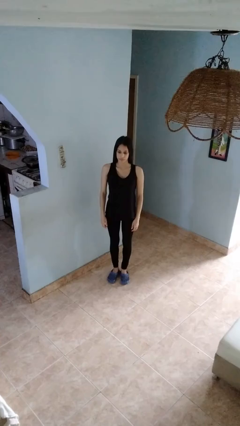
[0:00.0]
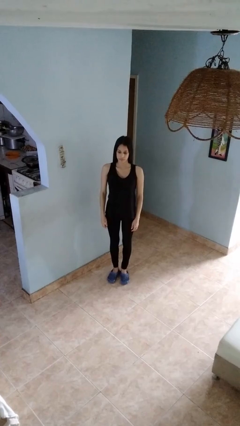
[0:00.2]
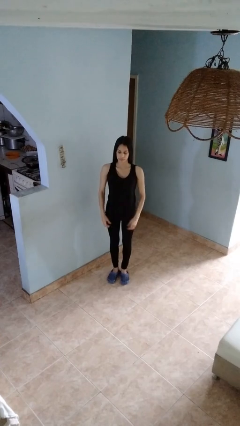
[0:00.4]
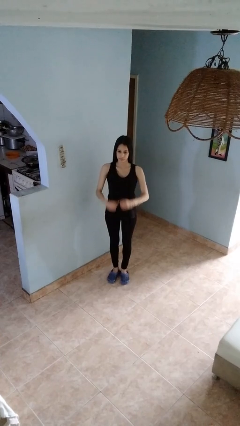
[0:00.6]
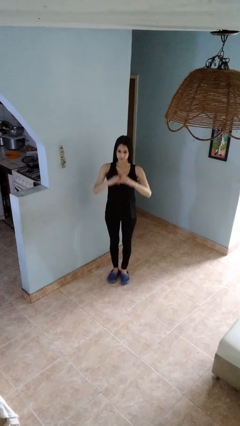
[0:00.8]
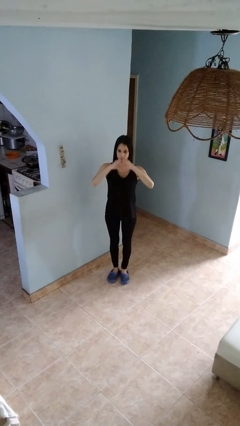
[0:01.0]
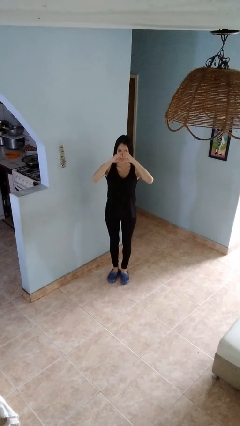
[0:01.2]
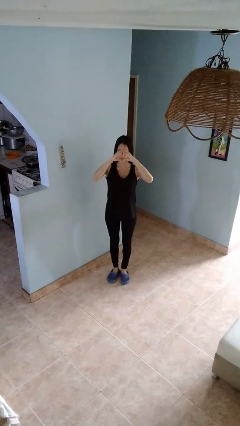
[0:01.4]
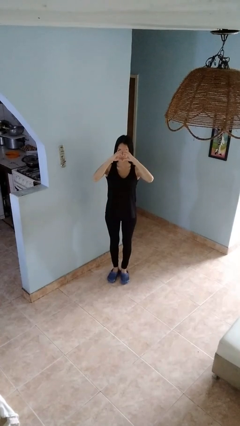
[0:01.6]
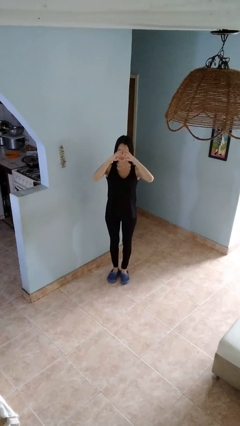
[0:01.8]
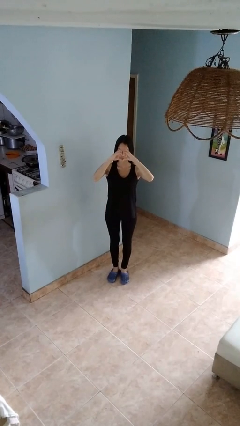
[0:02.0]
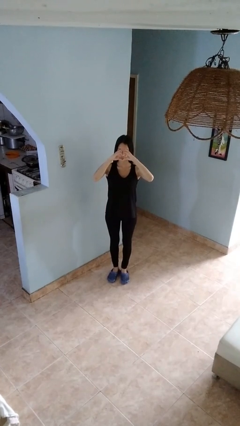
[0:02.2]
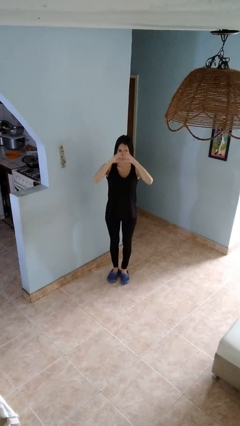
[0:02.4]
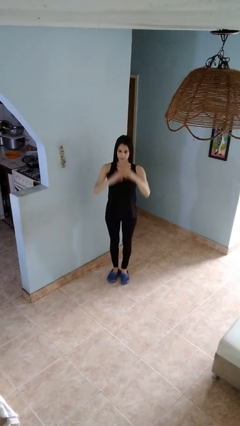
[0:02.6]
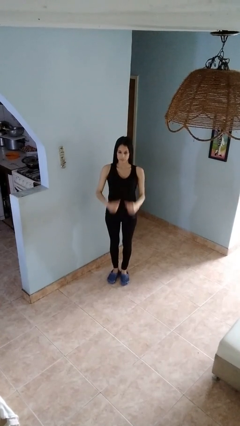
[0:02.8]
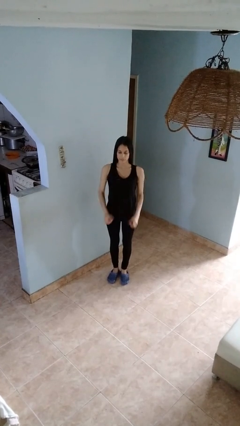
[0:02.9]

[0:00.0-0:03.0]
person gestures heart

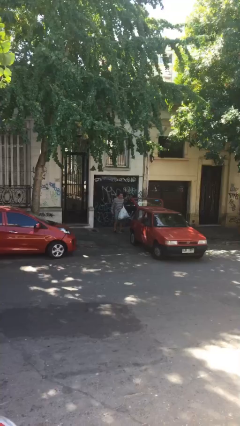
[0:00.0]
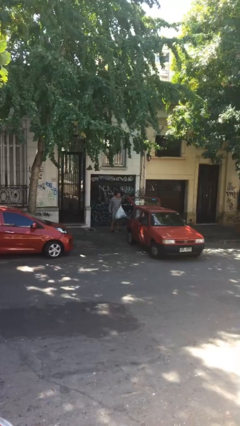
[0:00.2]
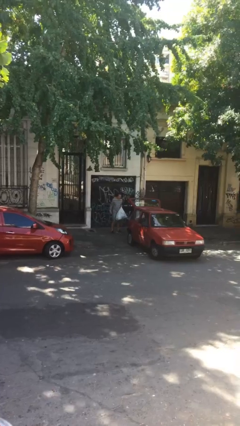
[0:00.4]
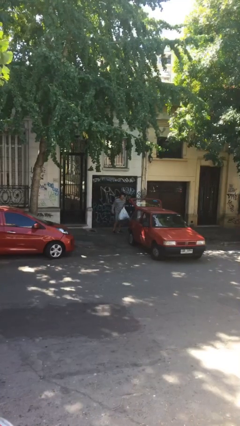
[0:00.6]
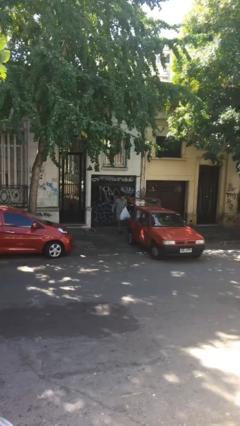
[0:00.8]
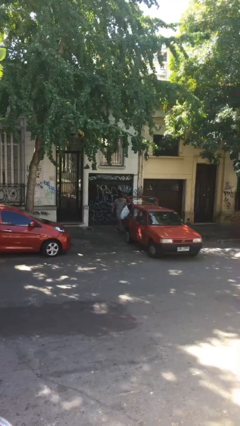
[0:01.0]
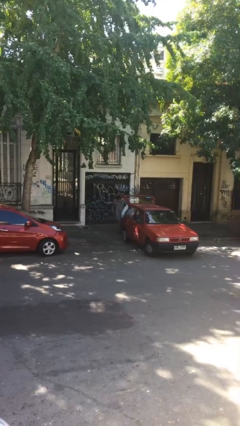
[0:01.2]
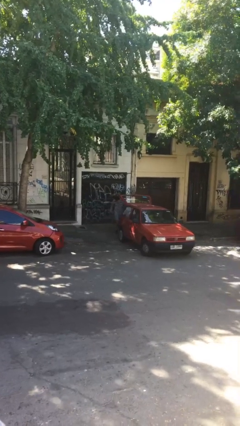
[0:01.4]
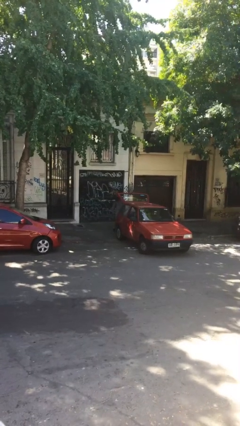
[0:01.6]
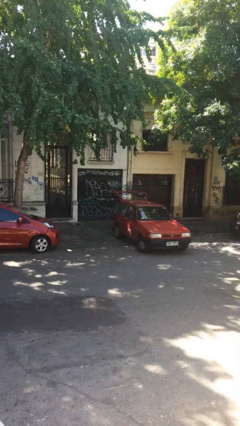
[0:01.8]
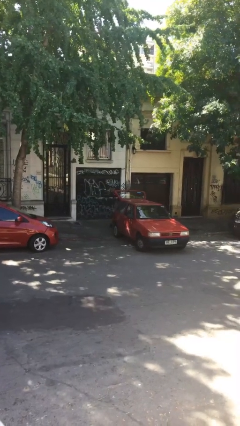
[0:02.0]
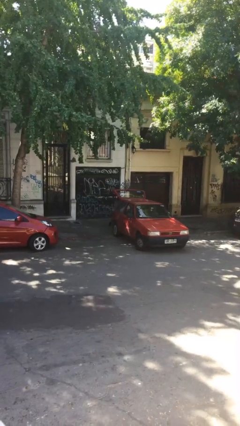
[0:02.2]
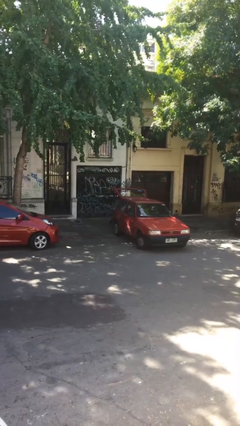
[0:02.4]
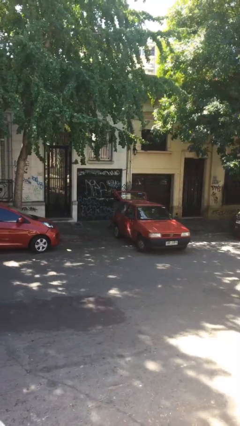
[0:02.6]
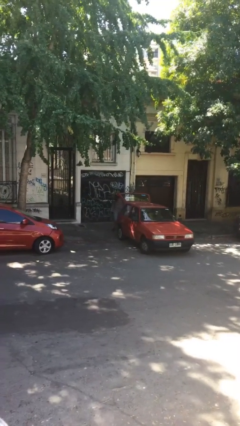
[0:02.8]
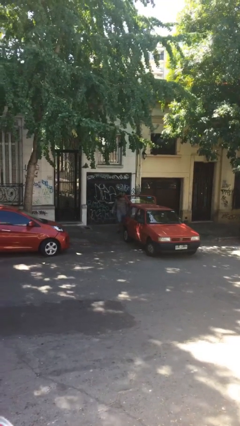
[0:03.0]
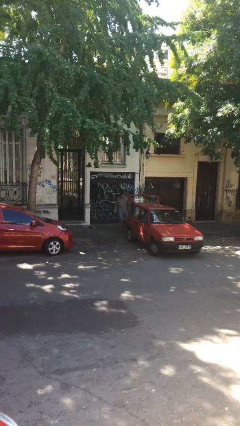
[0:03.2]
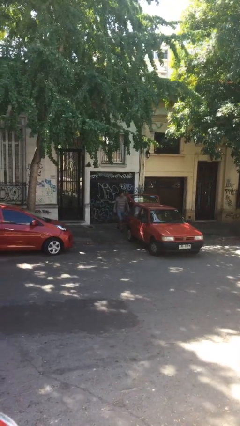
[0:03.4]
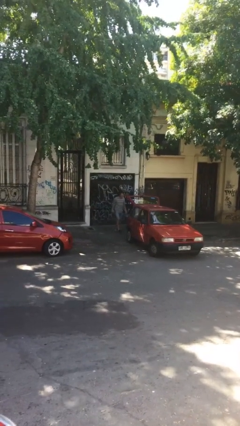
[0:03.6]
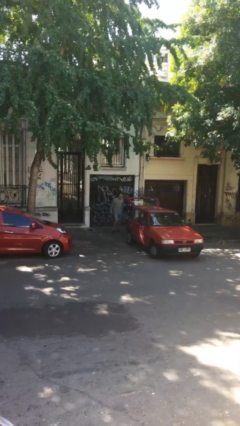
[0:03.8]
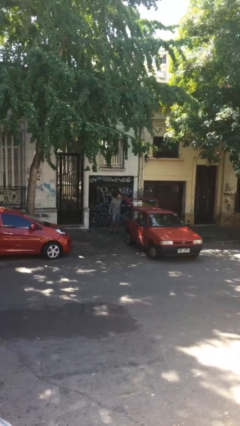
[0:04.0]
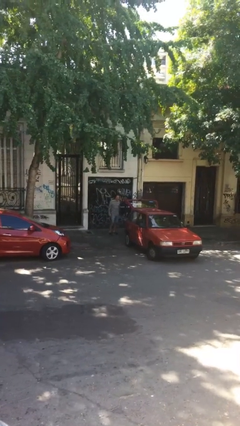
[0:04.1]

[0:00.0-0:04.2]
person loads car

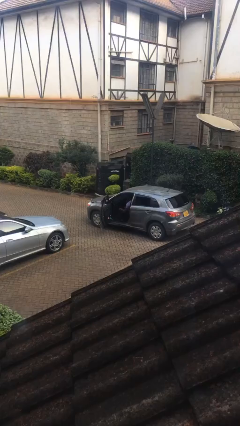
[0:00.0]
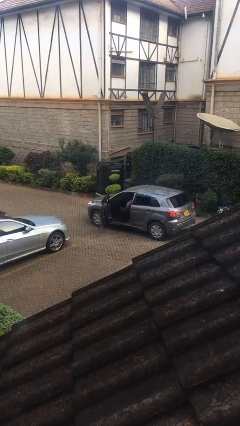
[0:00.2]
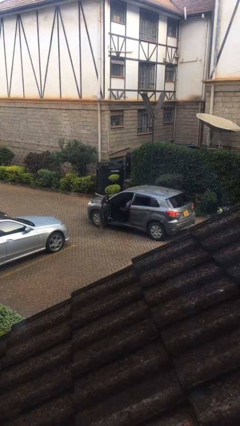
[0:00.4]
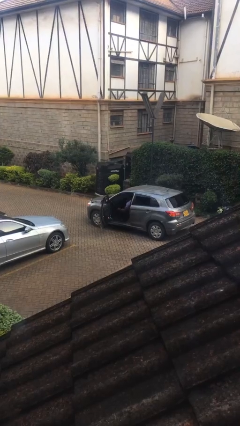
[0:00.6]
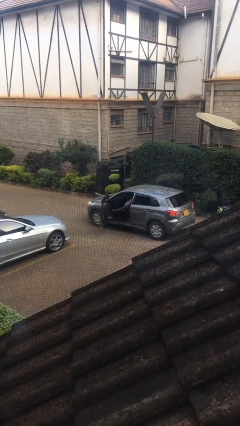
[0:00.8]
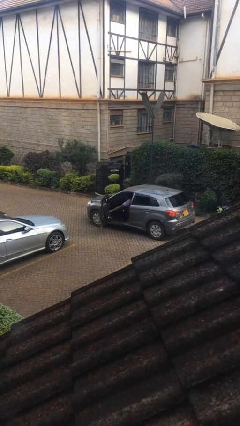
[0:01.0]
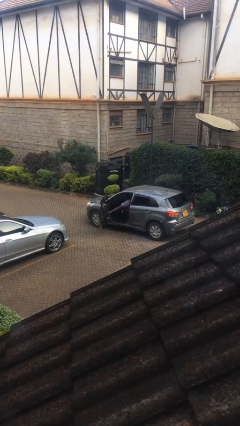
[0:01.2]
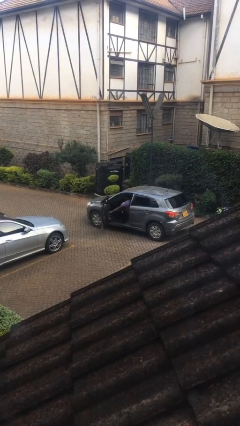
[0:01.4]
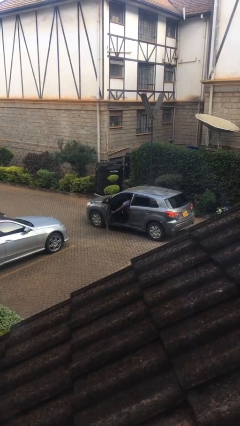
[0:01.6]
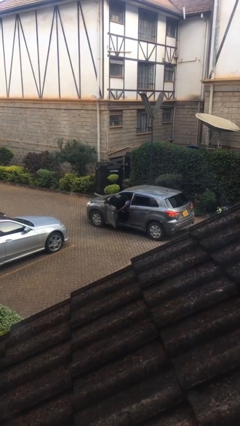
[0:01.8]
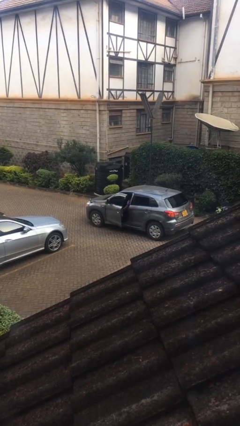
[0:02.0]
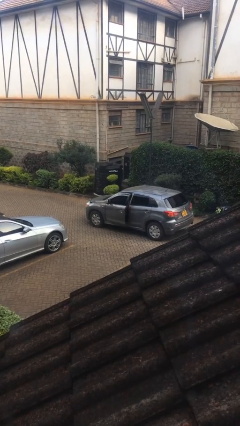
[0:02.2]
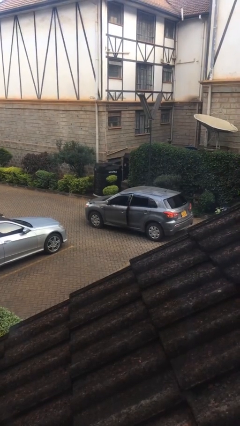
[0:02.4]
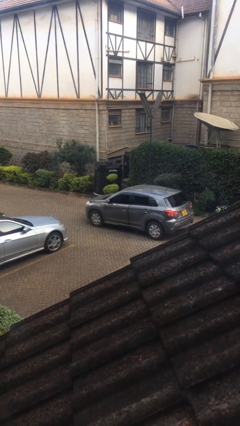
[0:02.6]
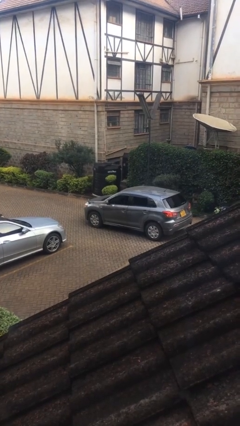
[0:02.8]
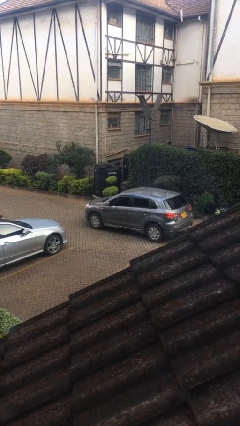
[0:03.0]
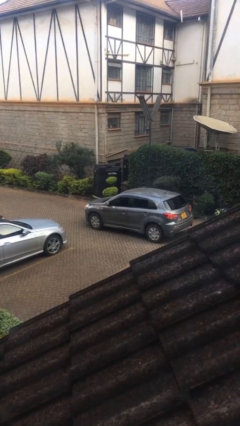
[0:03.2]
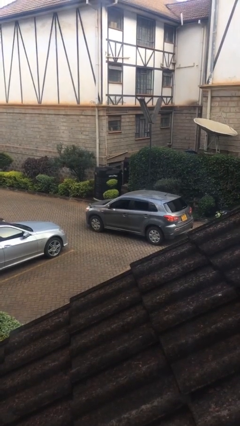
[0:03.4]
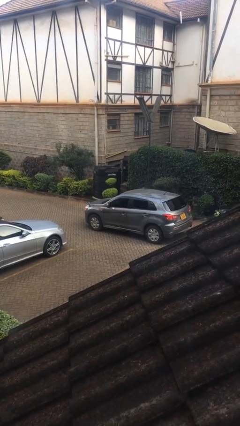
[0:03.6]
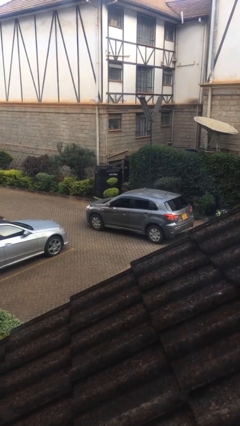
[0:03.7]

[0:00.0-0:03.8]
person closes car door

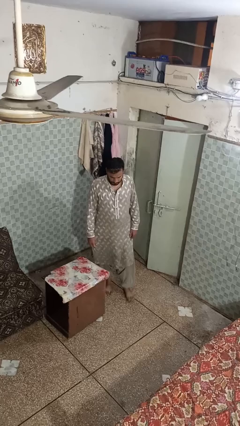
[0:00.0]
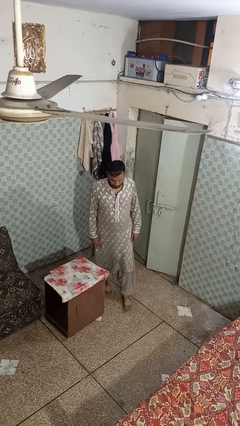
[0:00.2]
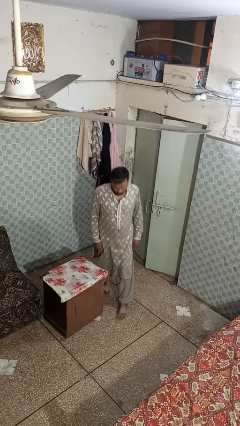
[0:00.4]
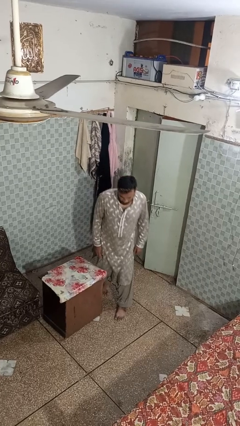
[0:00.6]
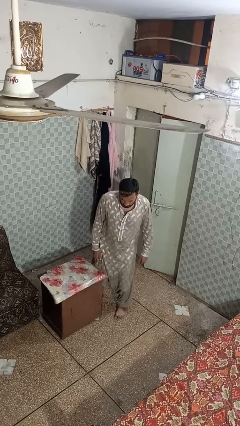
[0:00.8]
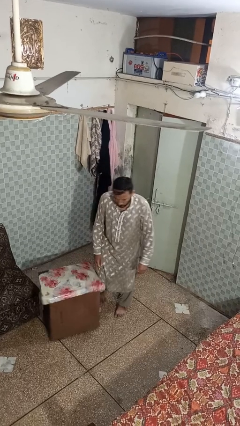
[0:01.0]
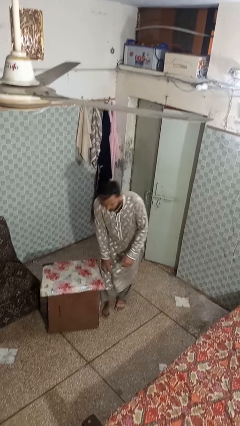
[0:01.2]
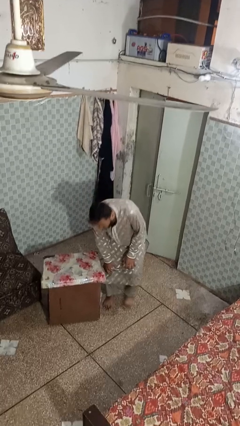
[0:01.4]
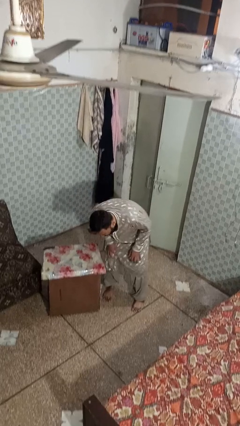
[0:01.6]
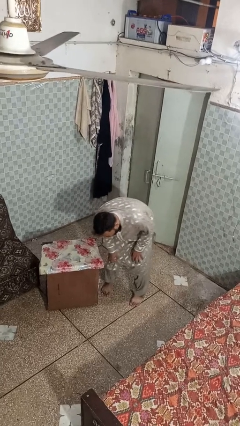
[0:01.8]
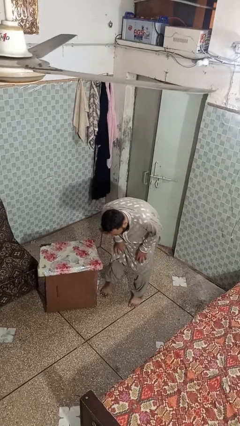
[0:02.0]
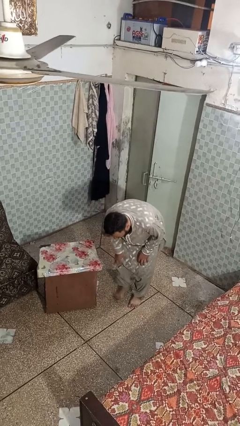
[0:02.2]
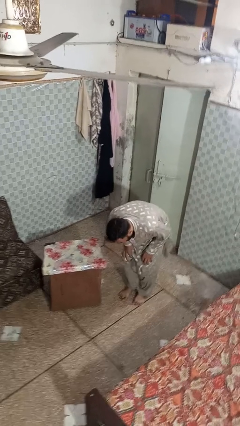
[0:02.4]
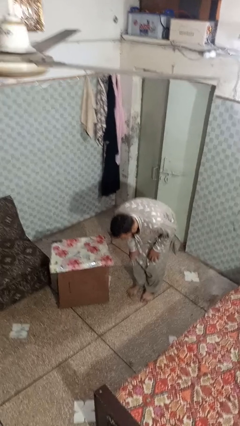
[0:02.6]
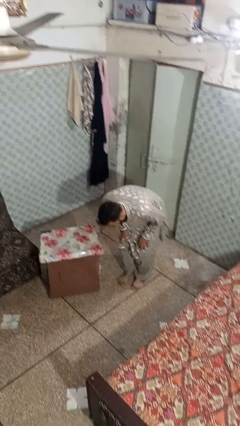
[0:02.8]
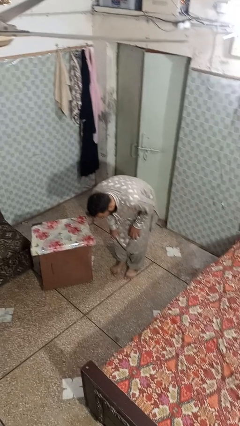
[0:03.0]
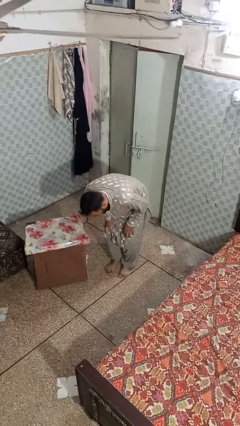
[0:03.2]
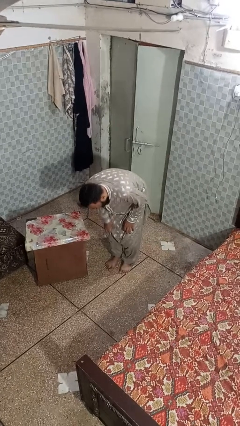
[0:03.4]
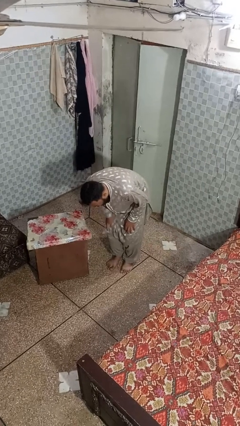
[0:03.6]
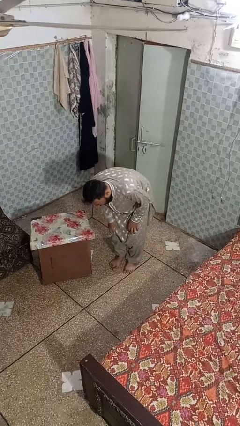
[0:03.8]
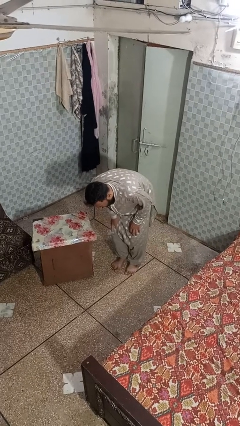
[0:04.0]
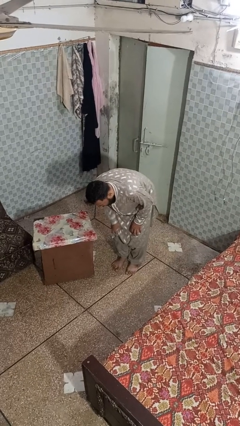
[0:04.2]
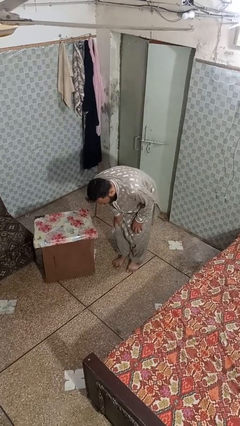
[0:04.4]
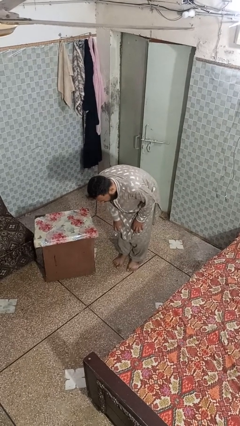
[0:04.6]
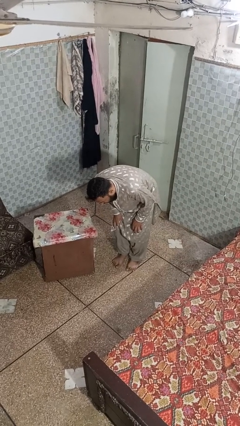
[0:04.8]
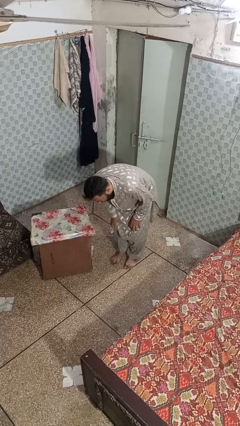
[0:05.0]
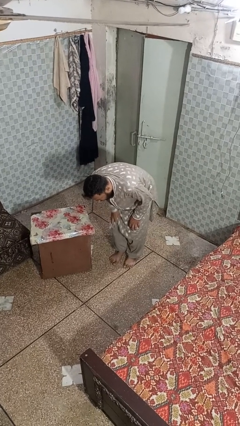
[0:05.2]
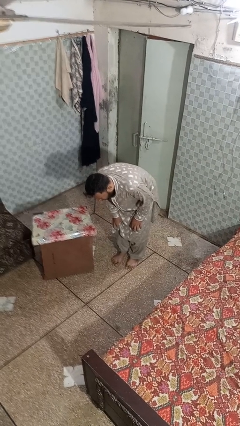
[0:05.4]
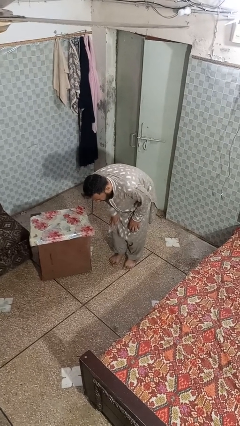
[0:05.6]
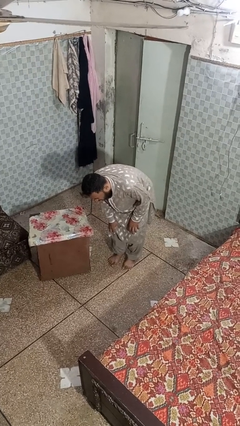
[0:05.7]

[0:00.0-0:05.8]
person trips on object on floor

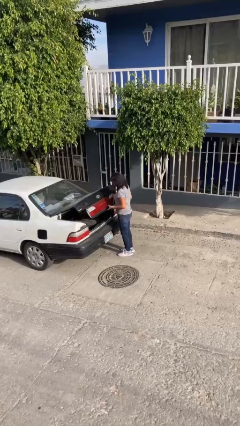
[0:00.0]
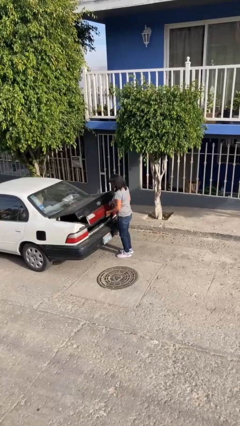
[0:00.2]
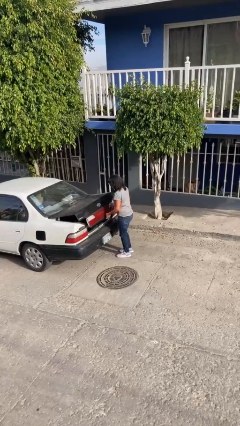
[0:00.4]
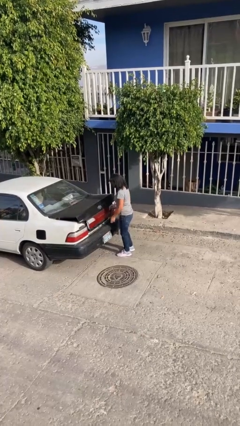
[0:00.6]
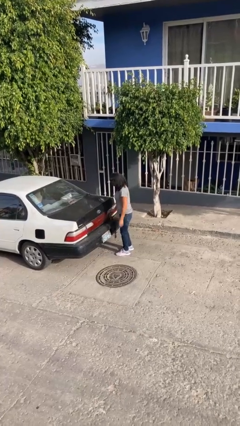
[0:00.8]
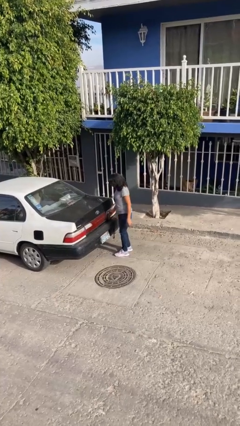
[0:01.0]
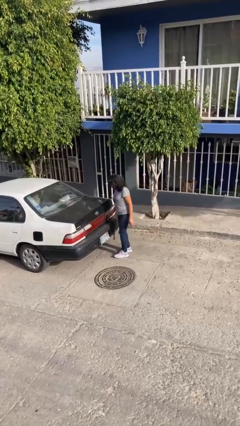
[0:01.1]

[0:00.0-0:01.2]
person closes car trunk
